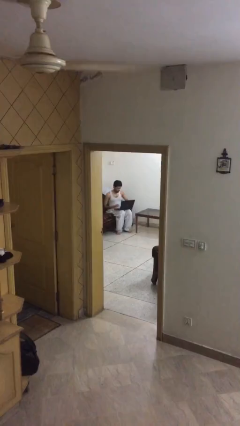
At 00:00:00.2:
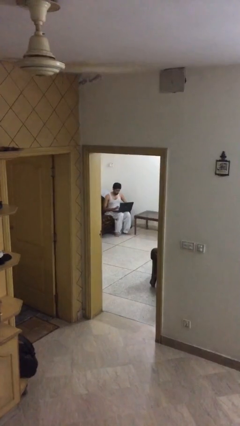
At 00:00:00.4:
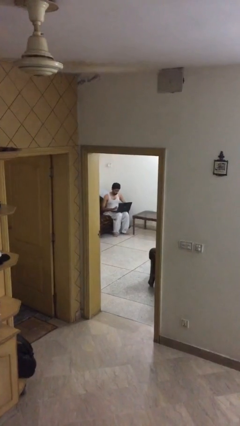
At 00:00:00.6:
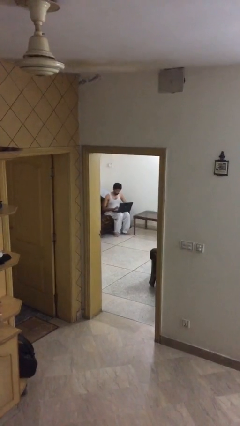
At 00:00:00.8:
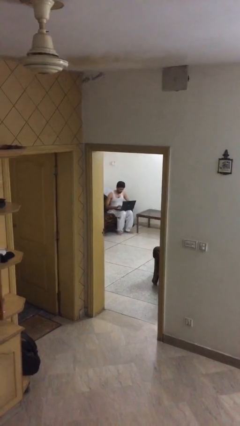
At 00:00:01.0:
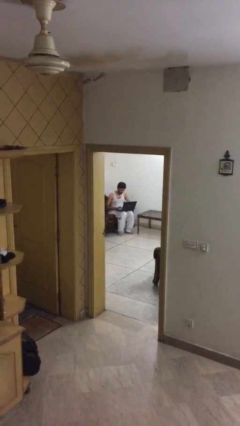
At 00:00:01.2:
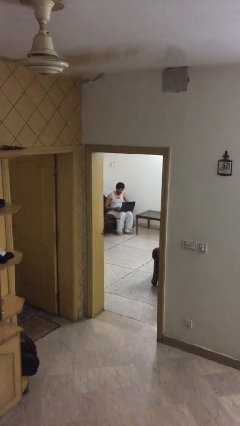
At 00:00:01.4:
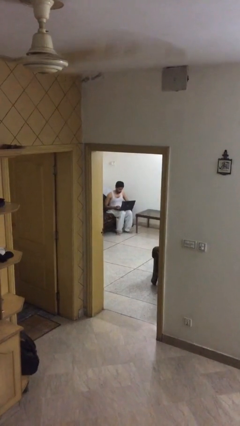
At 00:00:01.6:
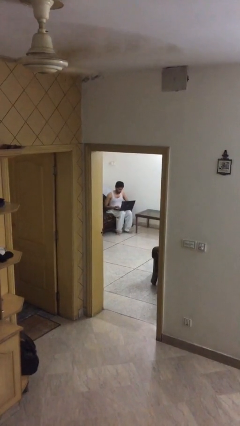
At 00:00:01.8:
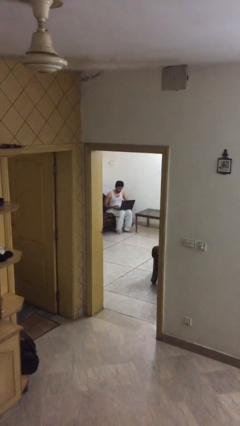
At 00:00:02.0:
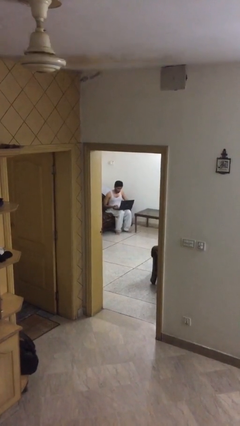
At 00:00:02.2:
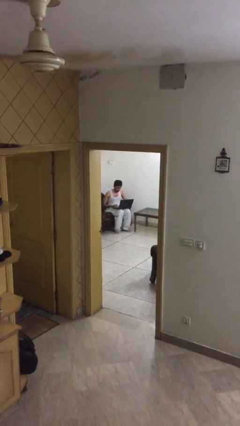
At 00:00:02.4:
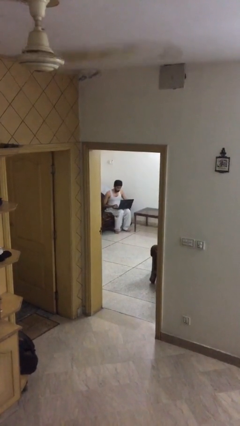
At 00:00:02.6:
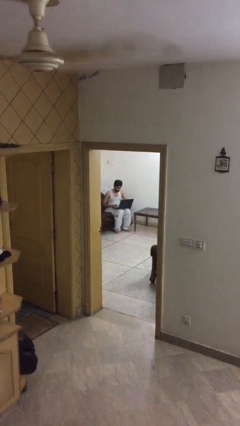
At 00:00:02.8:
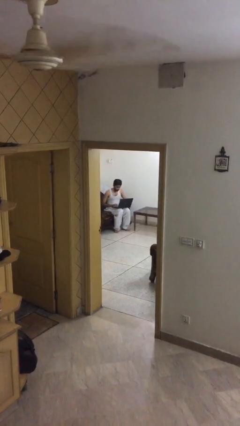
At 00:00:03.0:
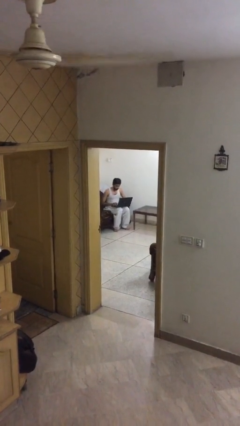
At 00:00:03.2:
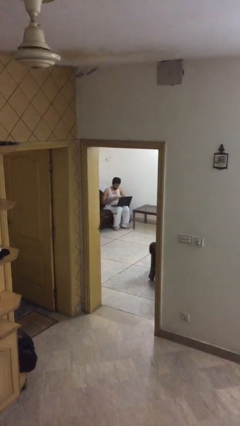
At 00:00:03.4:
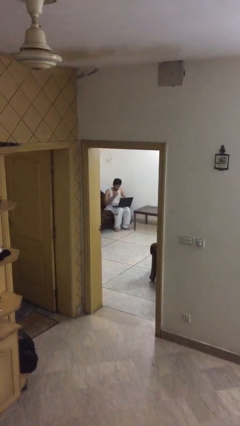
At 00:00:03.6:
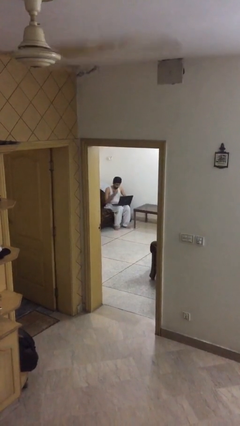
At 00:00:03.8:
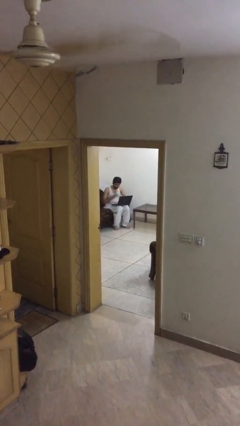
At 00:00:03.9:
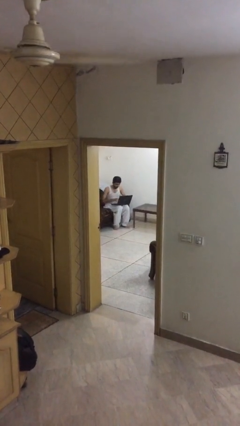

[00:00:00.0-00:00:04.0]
person interacts with laptop

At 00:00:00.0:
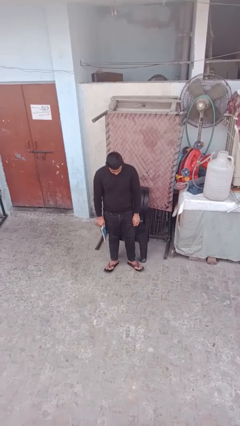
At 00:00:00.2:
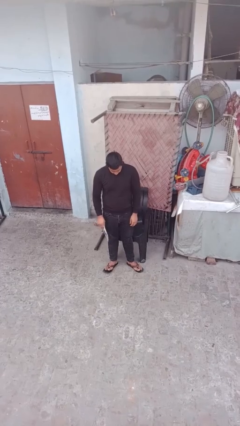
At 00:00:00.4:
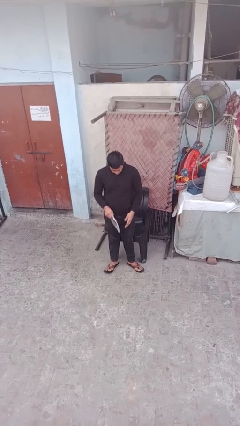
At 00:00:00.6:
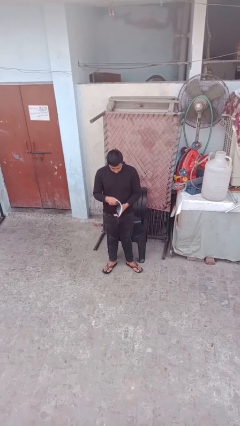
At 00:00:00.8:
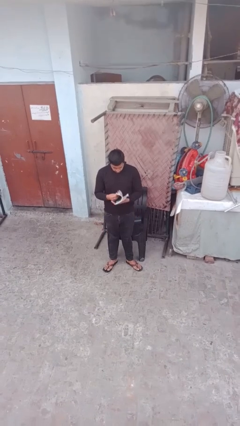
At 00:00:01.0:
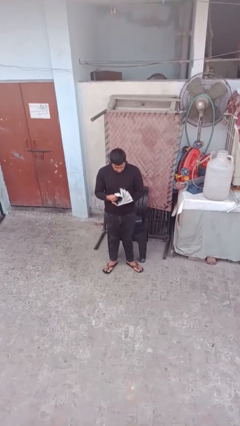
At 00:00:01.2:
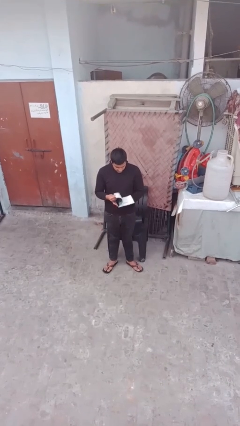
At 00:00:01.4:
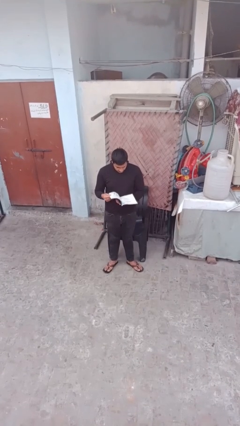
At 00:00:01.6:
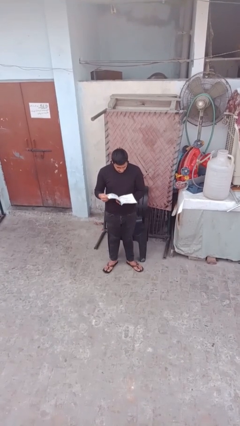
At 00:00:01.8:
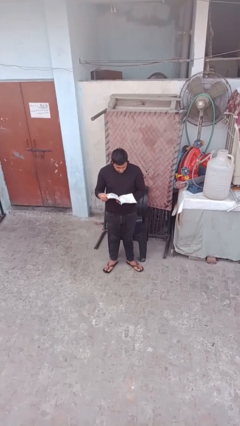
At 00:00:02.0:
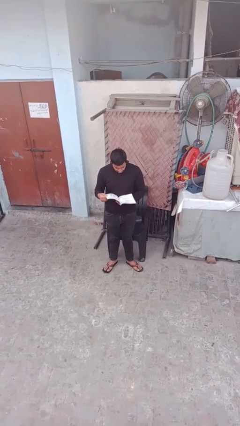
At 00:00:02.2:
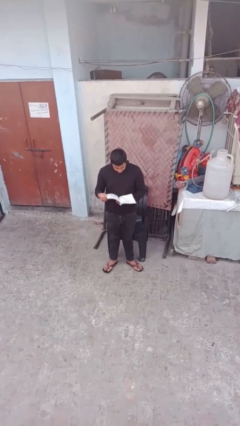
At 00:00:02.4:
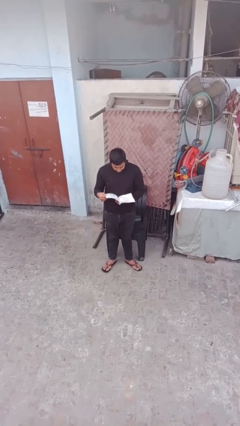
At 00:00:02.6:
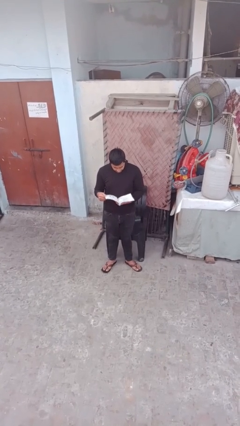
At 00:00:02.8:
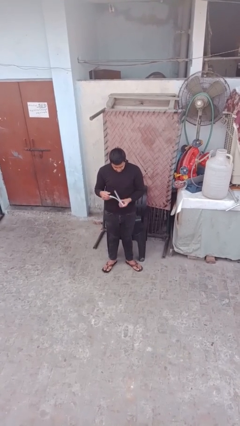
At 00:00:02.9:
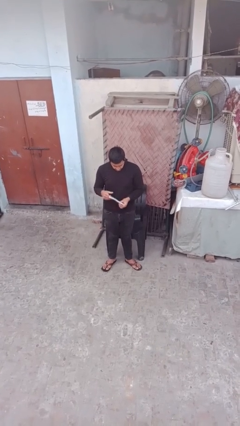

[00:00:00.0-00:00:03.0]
person reads document

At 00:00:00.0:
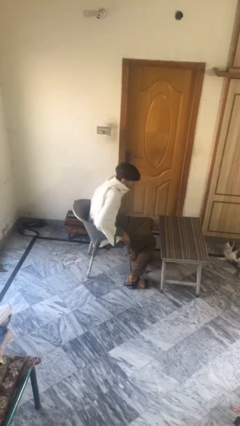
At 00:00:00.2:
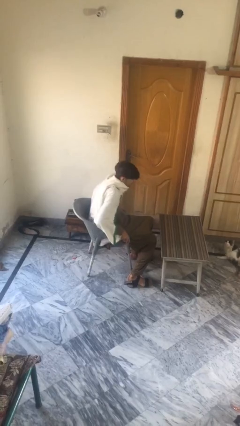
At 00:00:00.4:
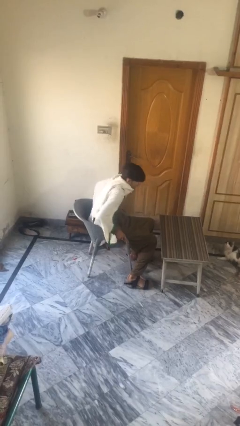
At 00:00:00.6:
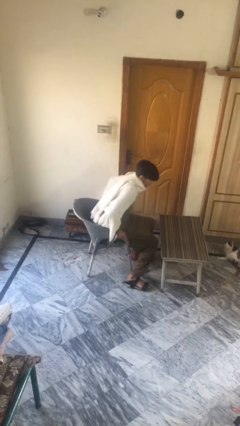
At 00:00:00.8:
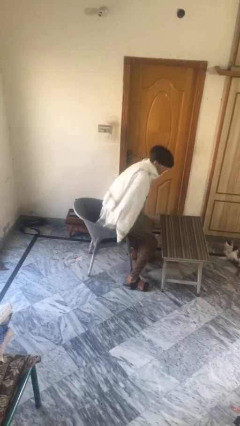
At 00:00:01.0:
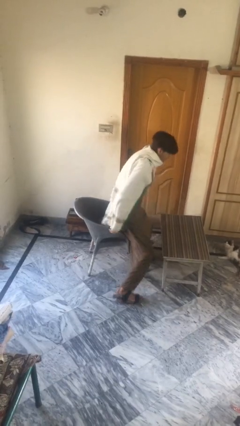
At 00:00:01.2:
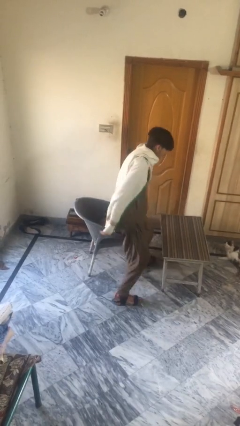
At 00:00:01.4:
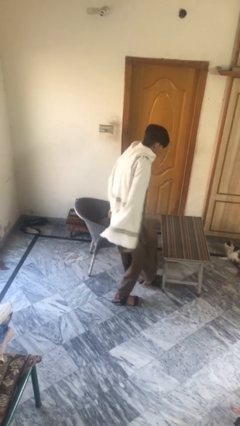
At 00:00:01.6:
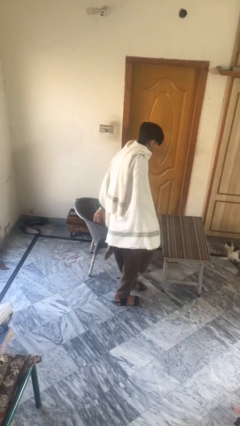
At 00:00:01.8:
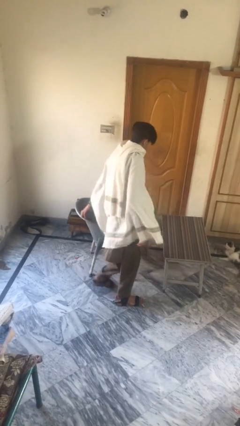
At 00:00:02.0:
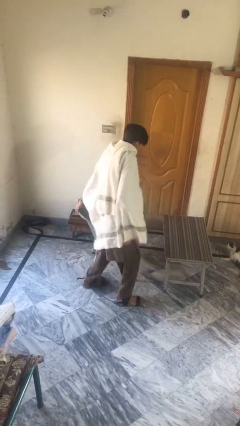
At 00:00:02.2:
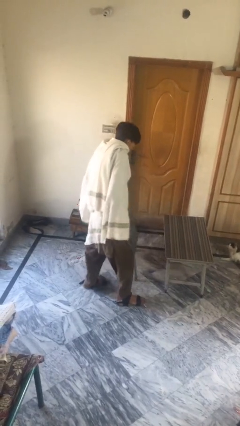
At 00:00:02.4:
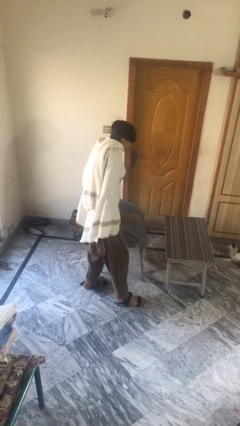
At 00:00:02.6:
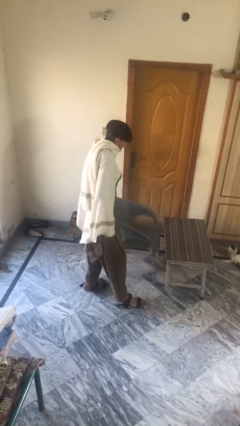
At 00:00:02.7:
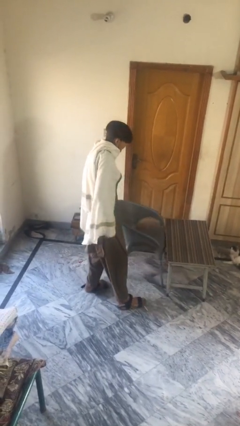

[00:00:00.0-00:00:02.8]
person stands up

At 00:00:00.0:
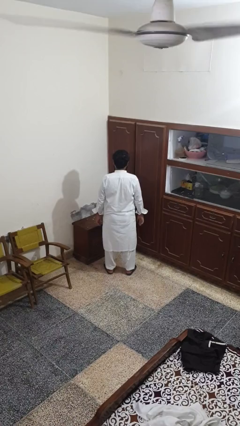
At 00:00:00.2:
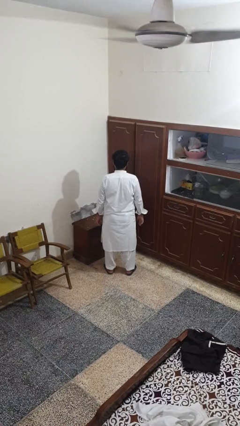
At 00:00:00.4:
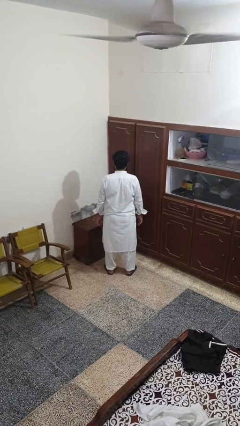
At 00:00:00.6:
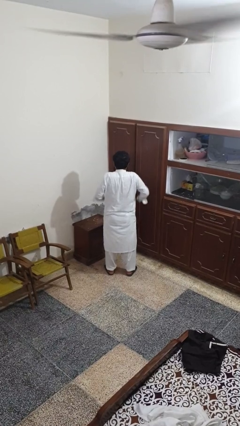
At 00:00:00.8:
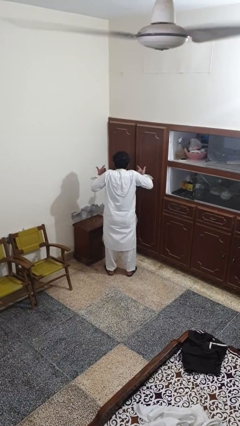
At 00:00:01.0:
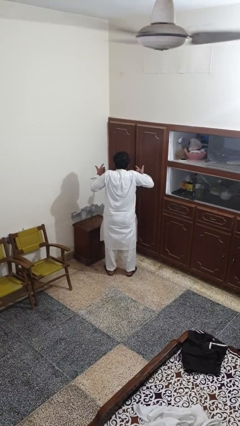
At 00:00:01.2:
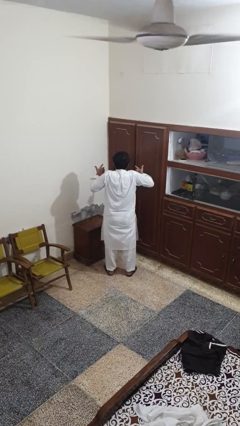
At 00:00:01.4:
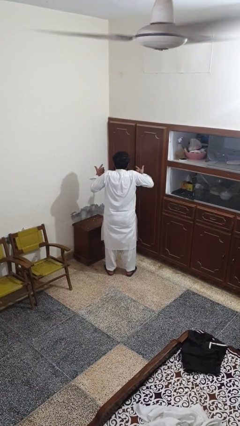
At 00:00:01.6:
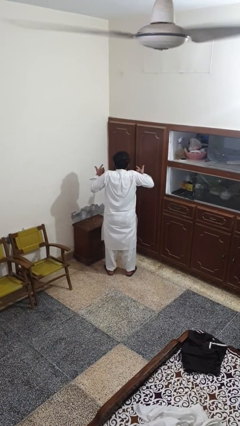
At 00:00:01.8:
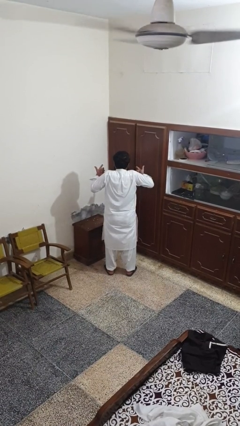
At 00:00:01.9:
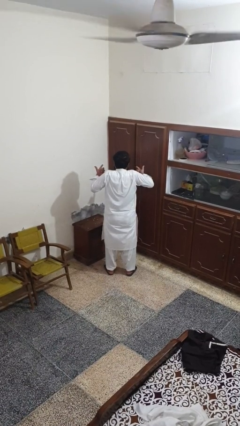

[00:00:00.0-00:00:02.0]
person shrugs

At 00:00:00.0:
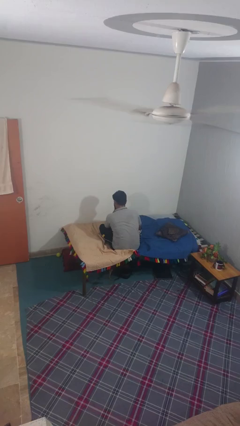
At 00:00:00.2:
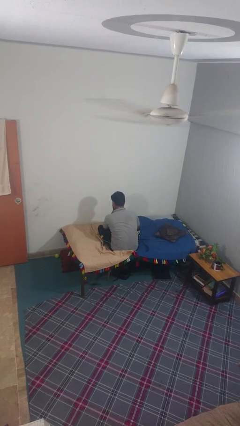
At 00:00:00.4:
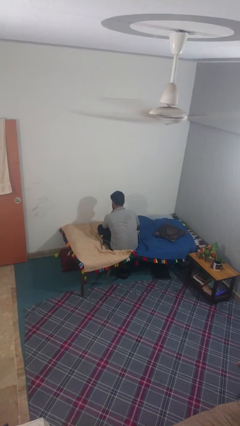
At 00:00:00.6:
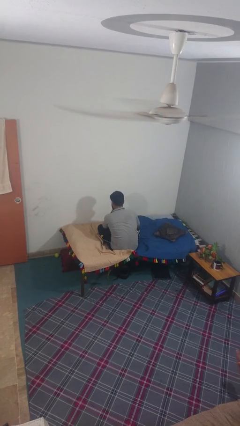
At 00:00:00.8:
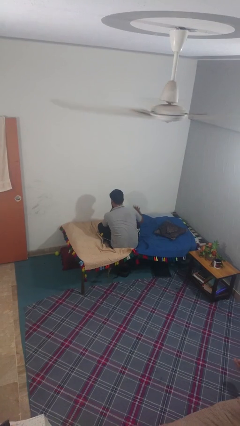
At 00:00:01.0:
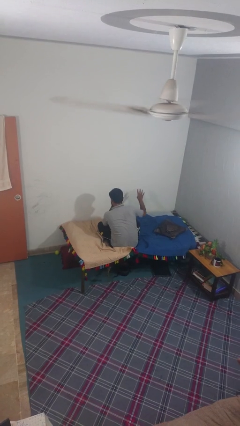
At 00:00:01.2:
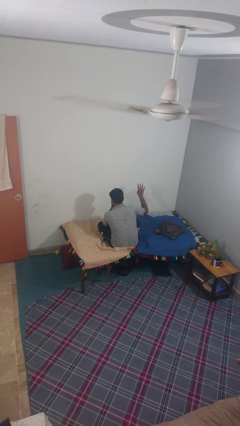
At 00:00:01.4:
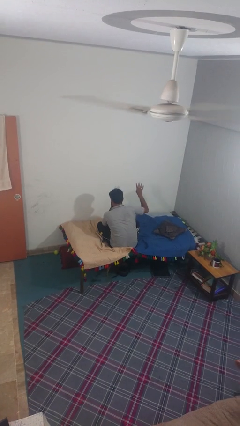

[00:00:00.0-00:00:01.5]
person gestures number four

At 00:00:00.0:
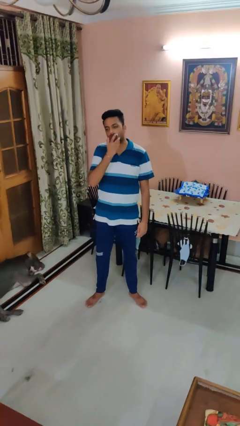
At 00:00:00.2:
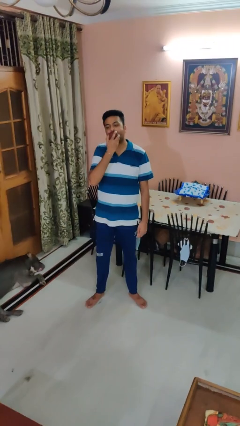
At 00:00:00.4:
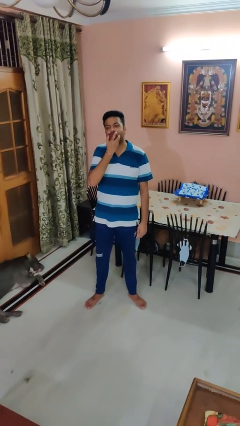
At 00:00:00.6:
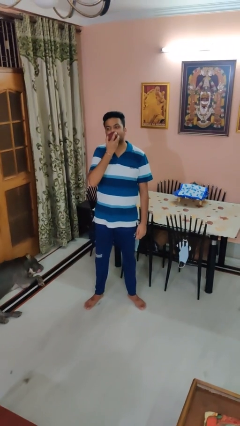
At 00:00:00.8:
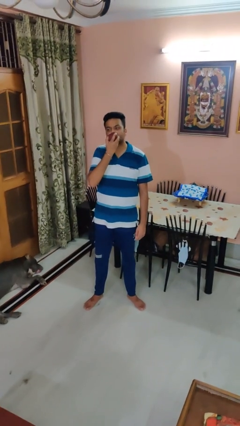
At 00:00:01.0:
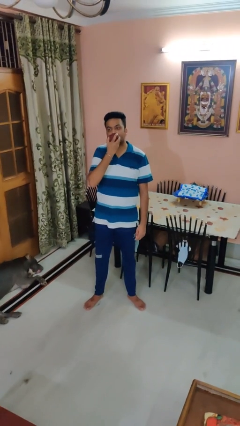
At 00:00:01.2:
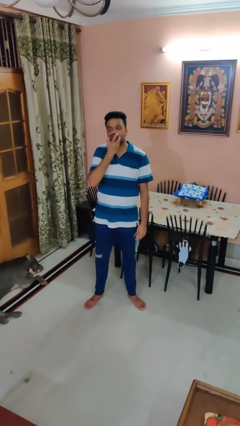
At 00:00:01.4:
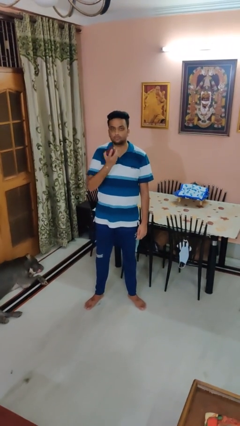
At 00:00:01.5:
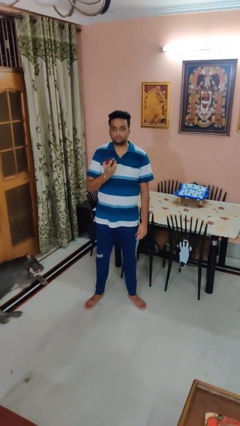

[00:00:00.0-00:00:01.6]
person eats apple

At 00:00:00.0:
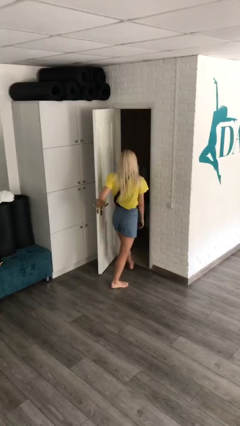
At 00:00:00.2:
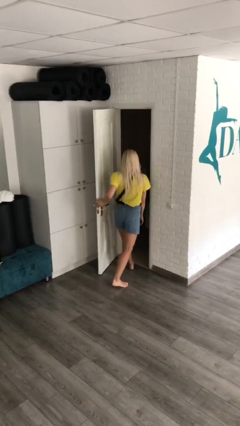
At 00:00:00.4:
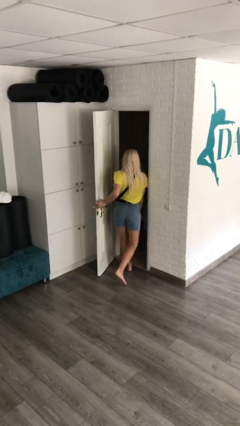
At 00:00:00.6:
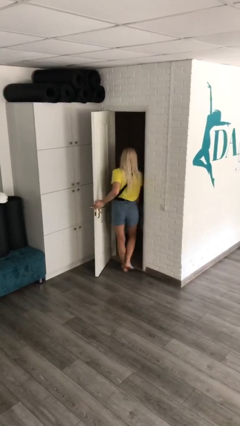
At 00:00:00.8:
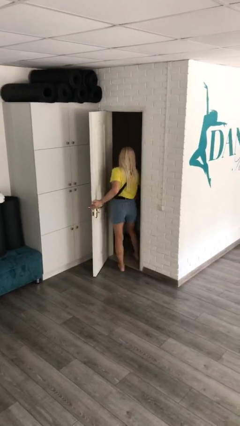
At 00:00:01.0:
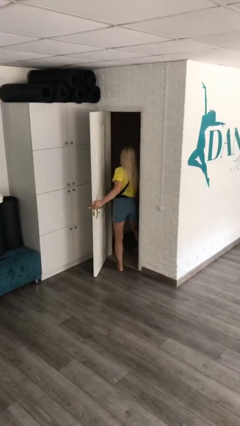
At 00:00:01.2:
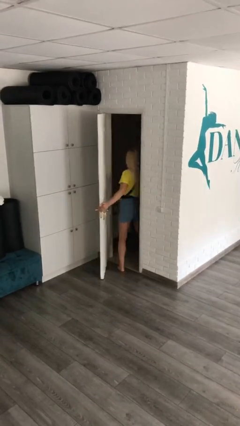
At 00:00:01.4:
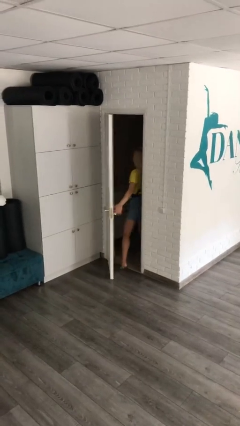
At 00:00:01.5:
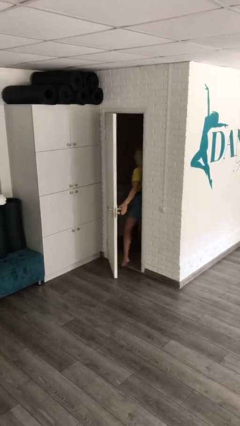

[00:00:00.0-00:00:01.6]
person exits scene through structure

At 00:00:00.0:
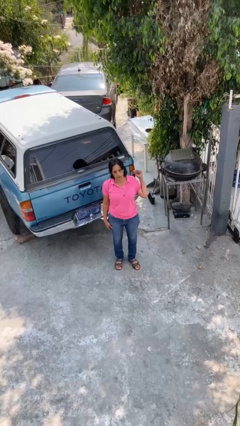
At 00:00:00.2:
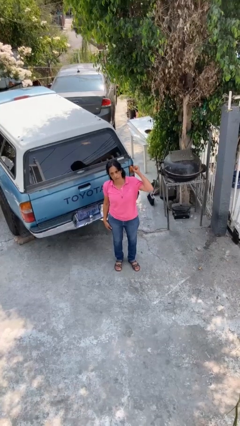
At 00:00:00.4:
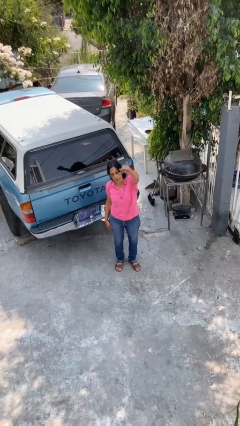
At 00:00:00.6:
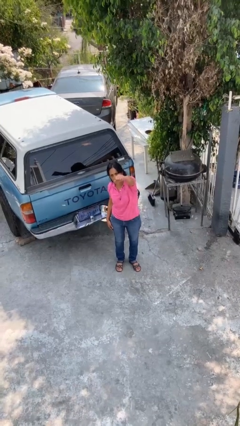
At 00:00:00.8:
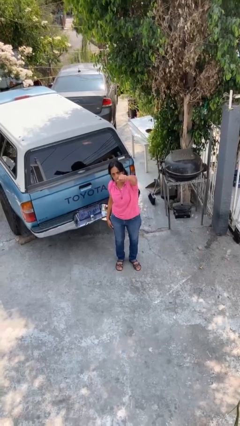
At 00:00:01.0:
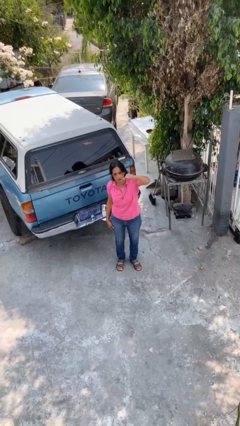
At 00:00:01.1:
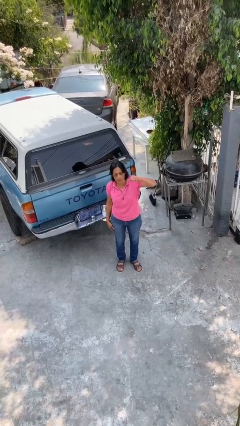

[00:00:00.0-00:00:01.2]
person punches
